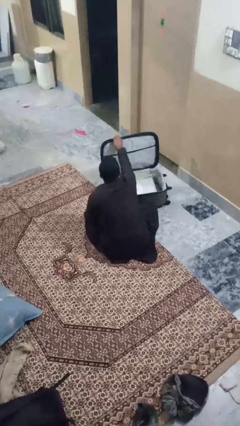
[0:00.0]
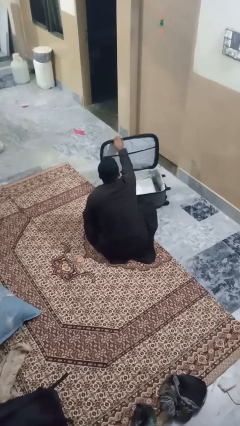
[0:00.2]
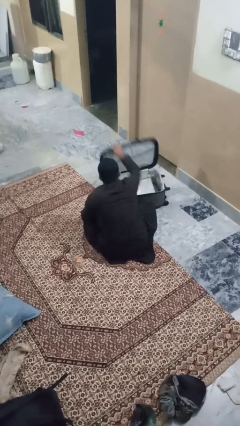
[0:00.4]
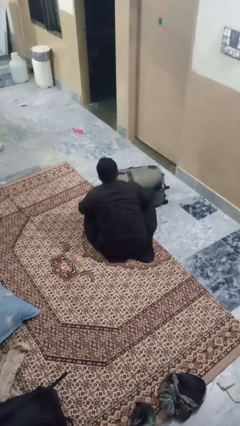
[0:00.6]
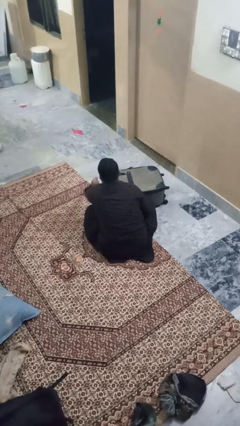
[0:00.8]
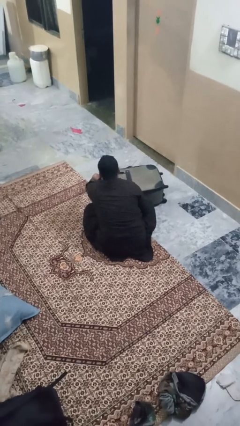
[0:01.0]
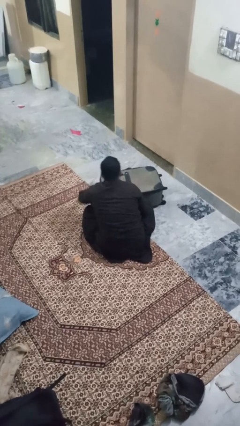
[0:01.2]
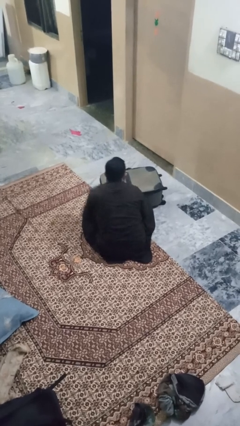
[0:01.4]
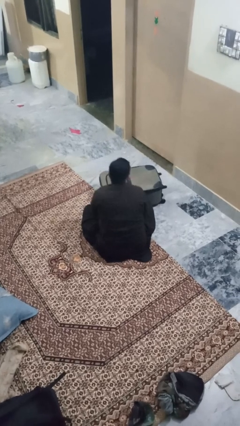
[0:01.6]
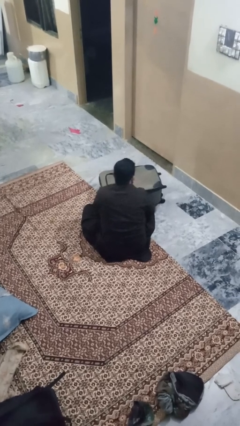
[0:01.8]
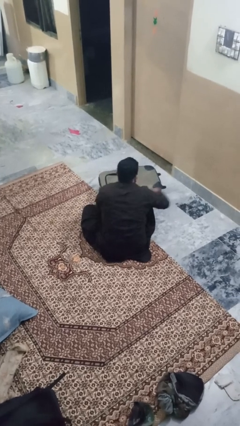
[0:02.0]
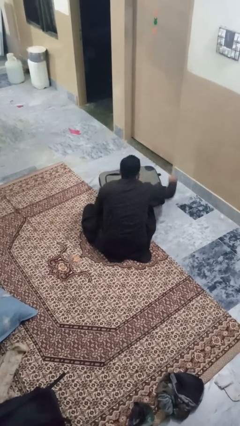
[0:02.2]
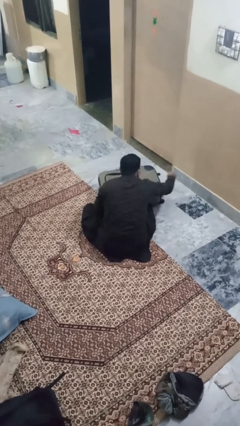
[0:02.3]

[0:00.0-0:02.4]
person closes suitcase

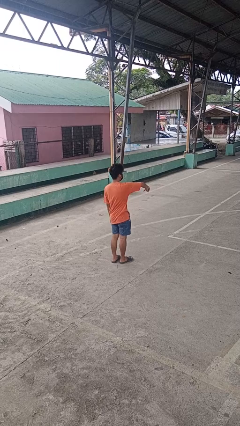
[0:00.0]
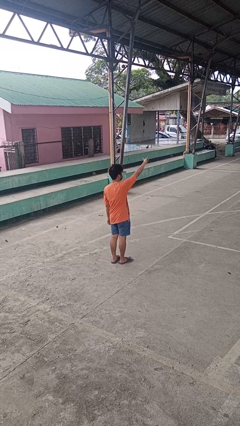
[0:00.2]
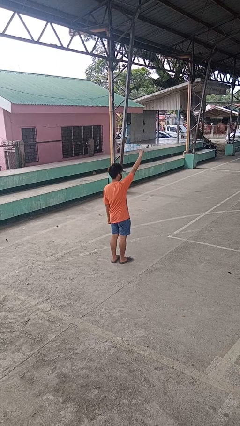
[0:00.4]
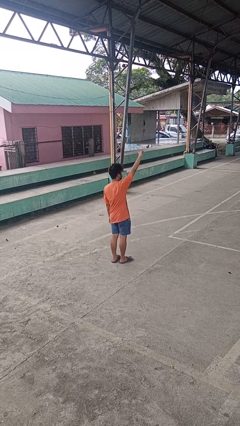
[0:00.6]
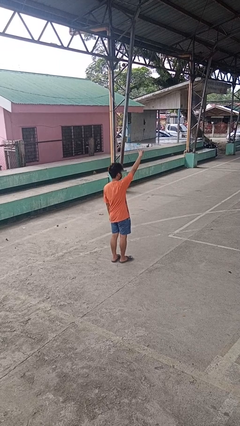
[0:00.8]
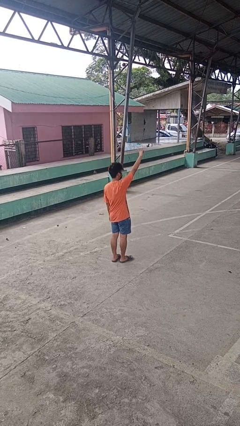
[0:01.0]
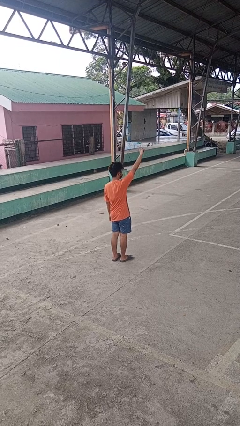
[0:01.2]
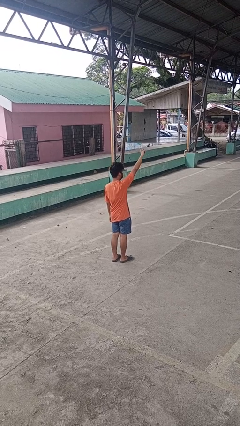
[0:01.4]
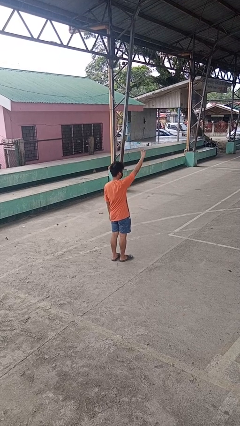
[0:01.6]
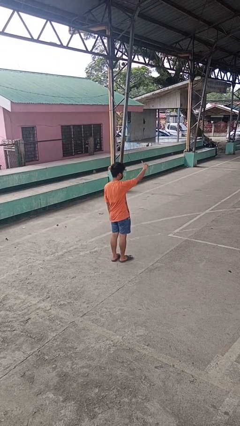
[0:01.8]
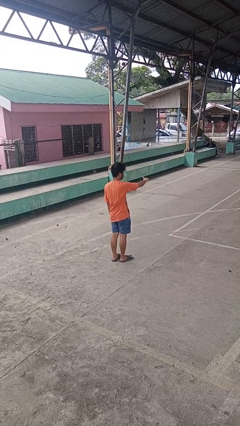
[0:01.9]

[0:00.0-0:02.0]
person gestures swipe up

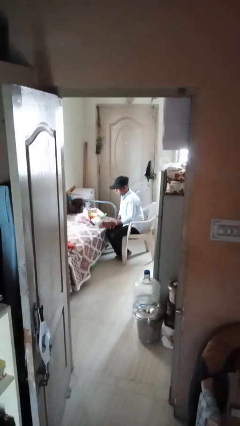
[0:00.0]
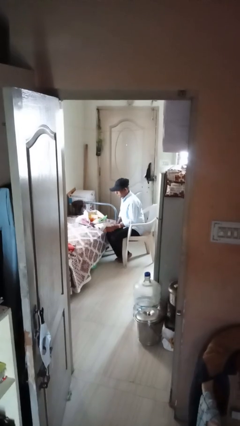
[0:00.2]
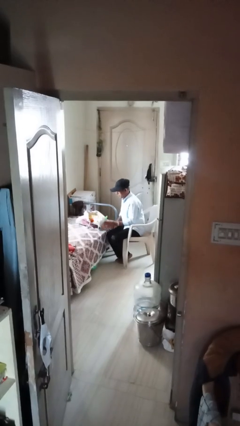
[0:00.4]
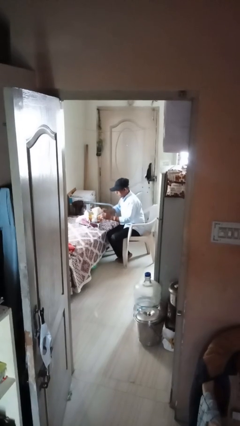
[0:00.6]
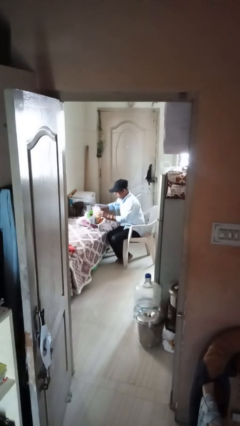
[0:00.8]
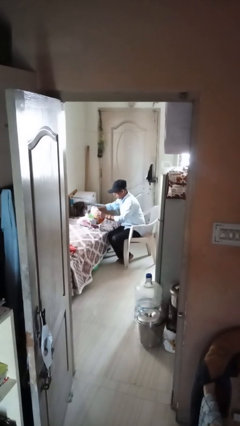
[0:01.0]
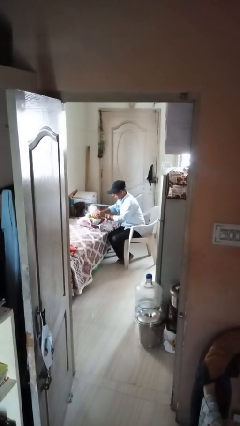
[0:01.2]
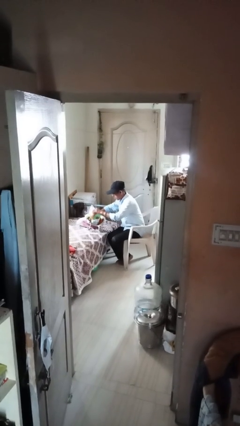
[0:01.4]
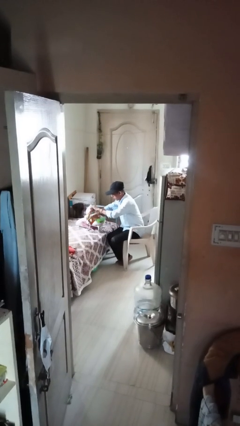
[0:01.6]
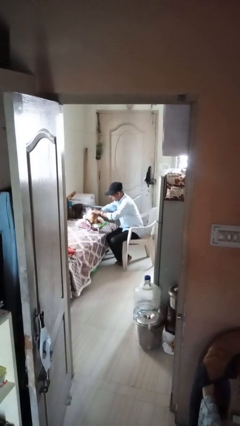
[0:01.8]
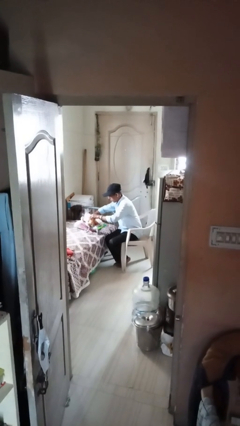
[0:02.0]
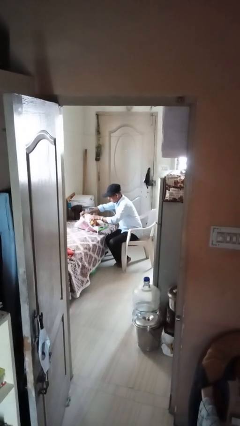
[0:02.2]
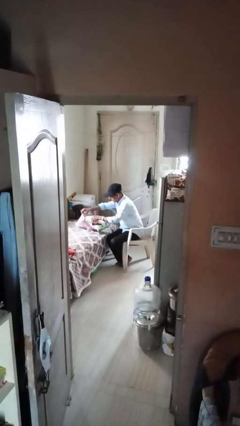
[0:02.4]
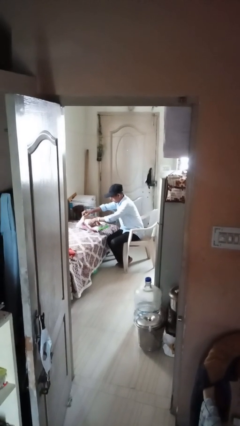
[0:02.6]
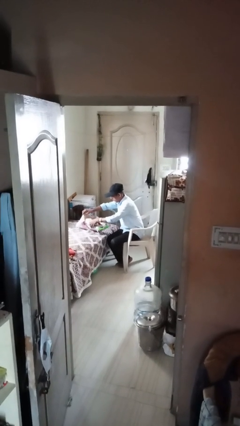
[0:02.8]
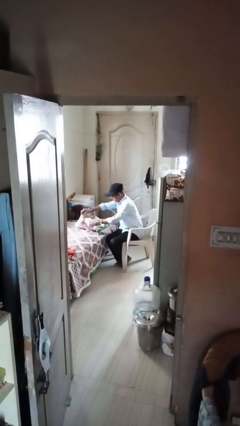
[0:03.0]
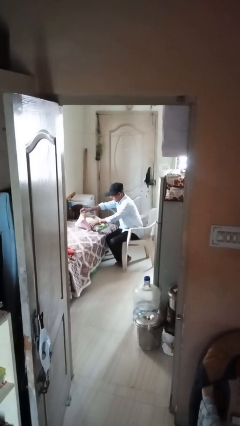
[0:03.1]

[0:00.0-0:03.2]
person puts object into bag

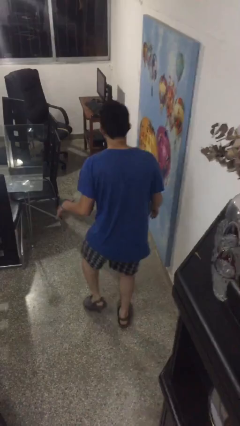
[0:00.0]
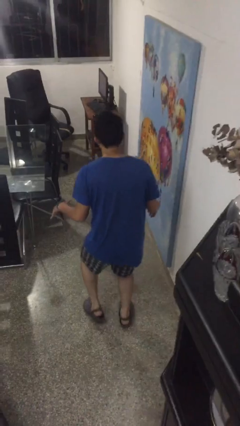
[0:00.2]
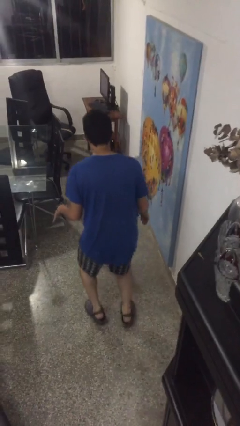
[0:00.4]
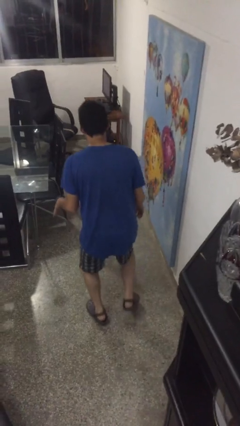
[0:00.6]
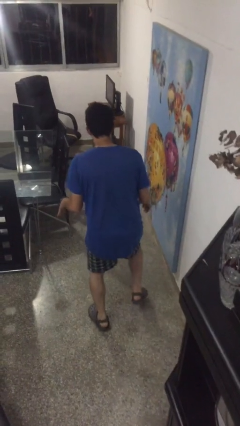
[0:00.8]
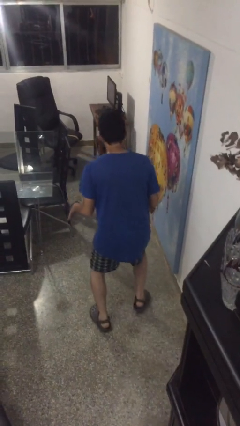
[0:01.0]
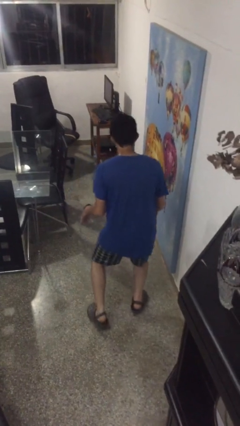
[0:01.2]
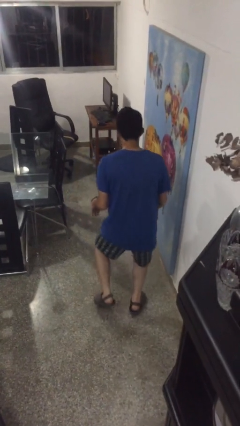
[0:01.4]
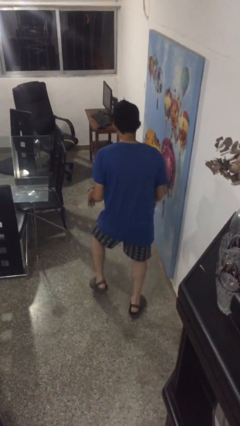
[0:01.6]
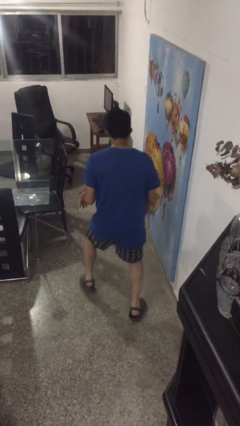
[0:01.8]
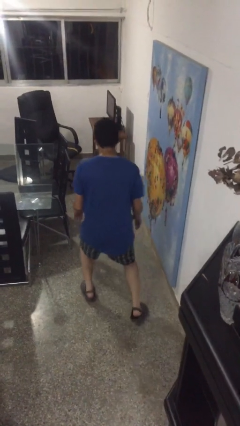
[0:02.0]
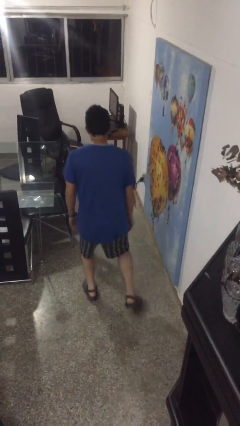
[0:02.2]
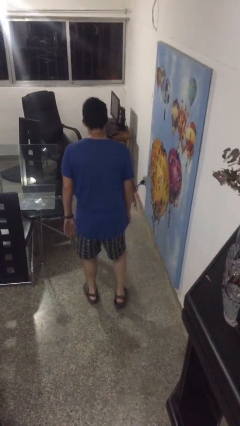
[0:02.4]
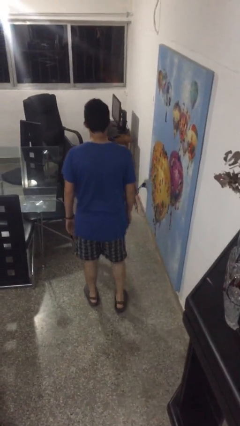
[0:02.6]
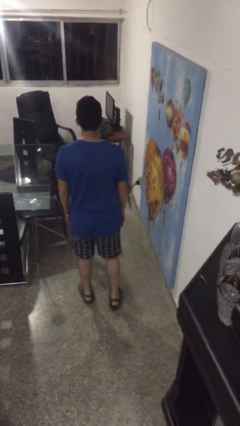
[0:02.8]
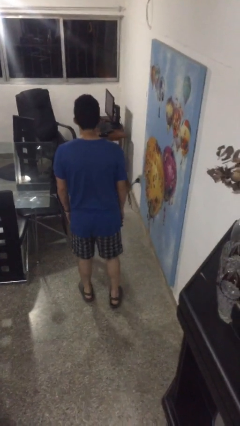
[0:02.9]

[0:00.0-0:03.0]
person walks tiptoe

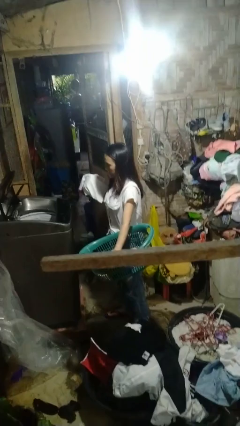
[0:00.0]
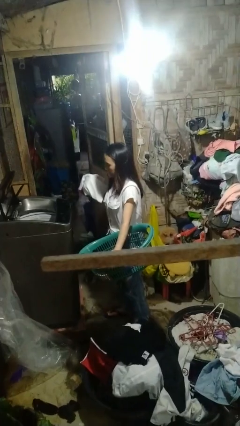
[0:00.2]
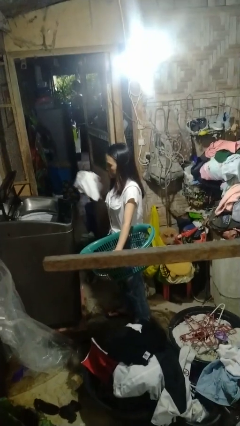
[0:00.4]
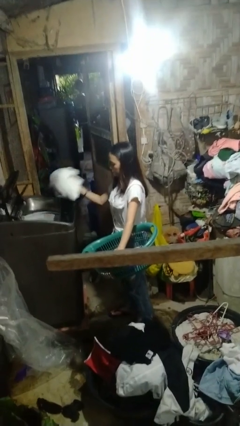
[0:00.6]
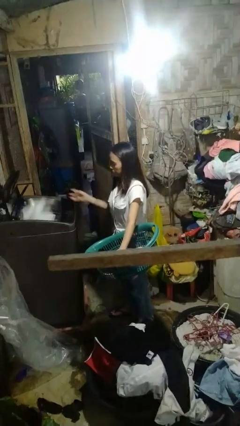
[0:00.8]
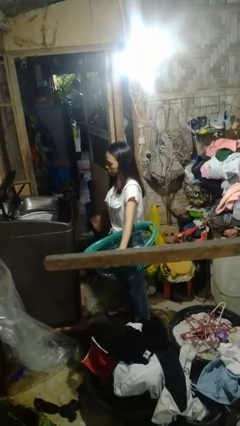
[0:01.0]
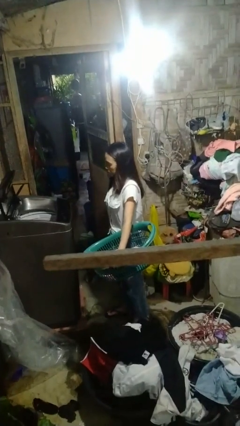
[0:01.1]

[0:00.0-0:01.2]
person loads dryer

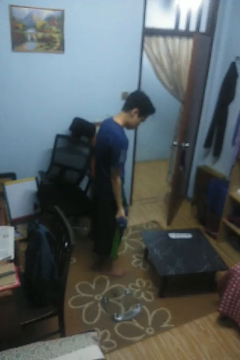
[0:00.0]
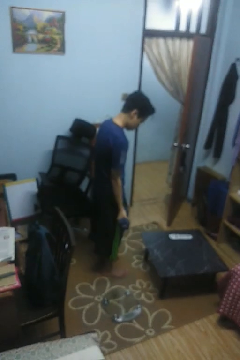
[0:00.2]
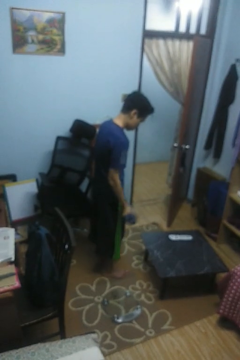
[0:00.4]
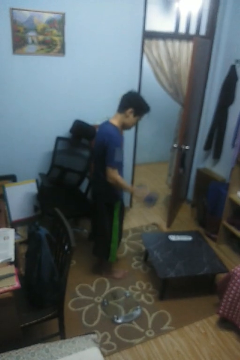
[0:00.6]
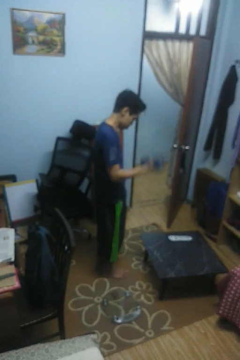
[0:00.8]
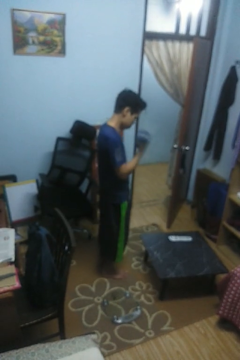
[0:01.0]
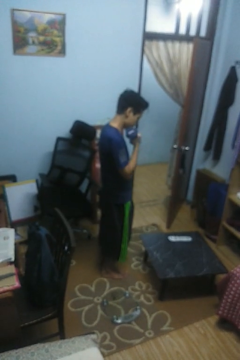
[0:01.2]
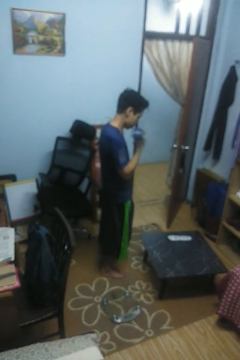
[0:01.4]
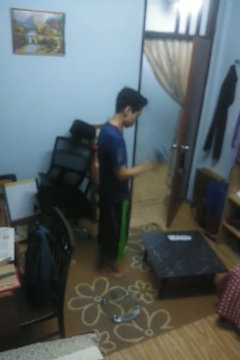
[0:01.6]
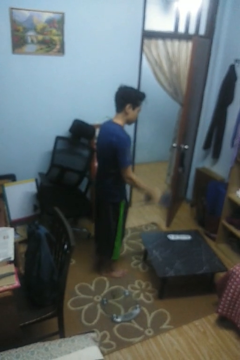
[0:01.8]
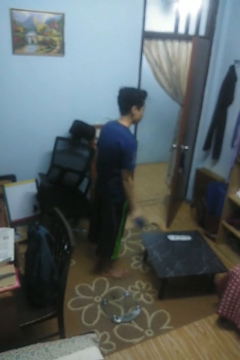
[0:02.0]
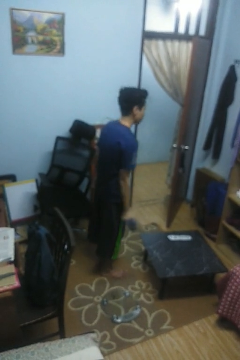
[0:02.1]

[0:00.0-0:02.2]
person lifts dumbbells

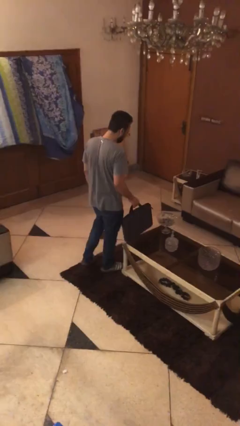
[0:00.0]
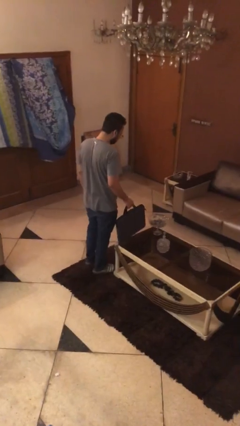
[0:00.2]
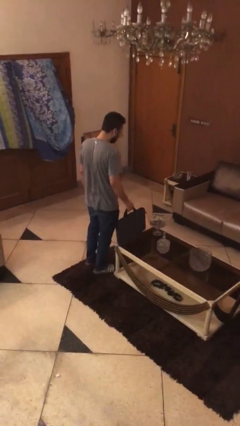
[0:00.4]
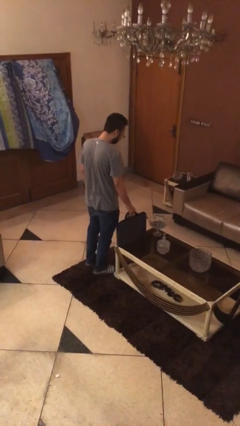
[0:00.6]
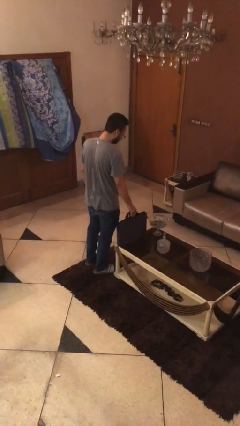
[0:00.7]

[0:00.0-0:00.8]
person puts down object on table

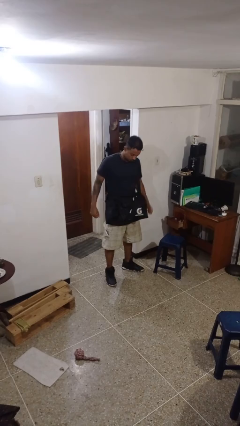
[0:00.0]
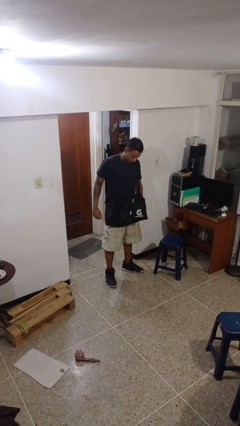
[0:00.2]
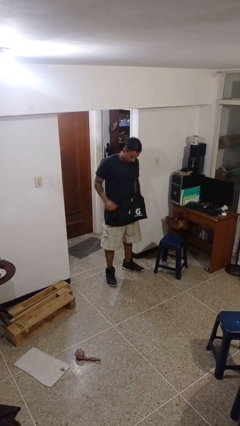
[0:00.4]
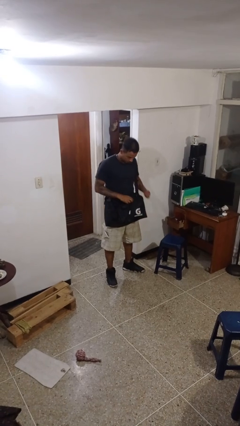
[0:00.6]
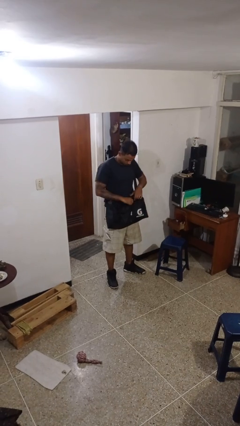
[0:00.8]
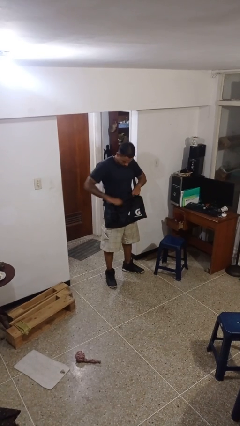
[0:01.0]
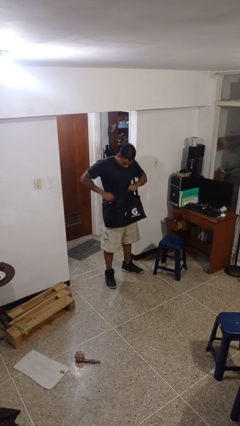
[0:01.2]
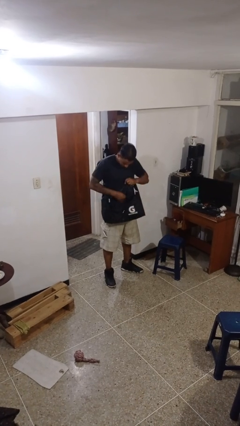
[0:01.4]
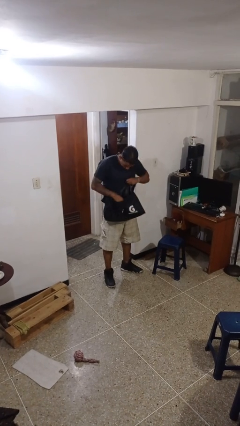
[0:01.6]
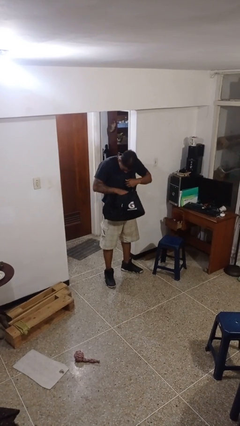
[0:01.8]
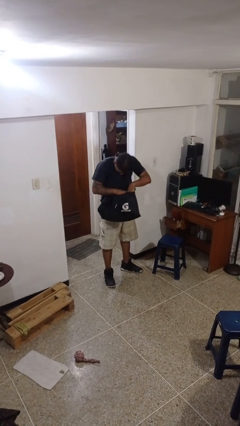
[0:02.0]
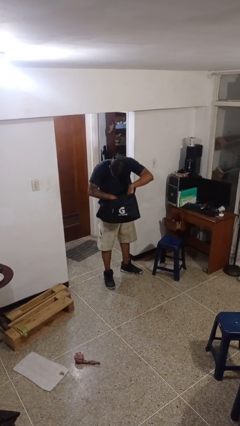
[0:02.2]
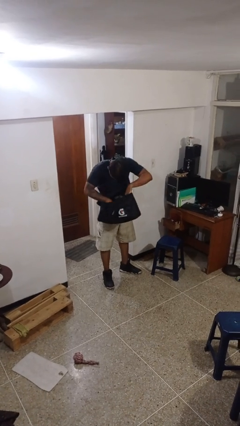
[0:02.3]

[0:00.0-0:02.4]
person searches in purse
